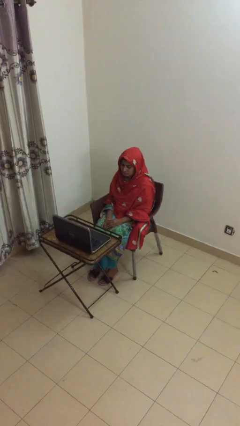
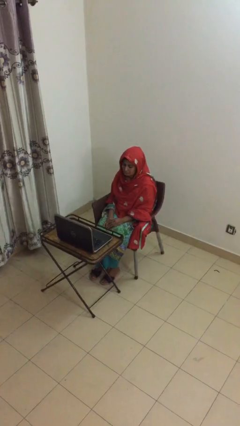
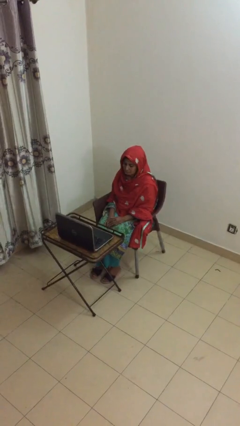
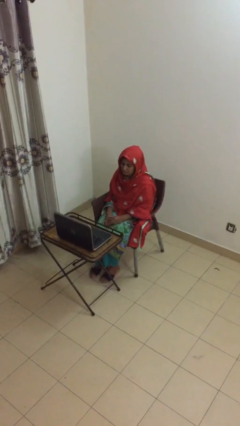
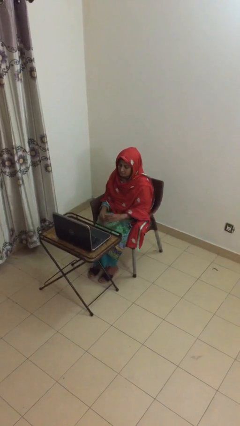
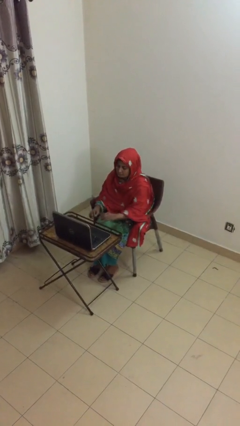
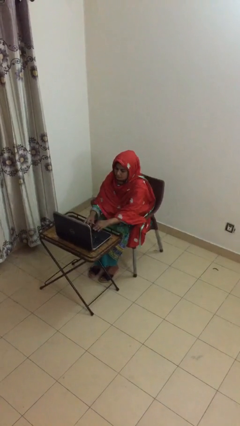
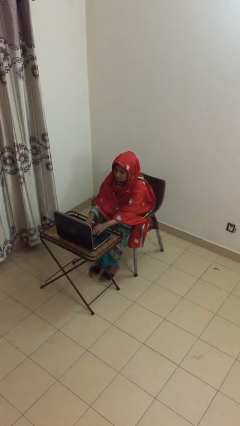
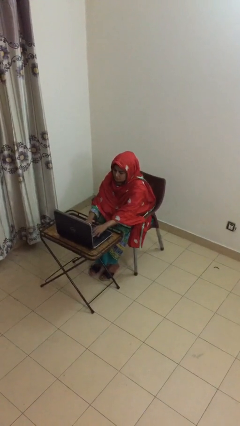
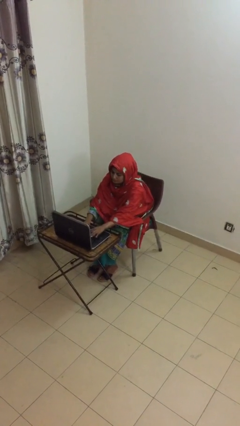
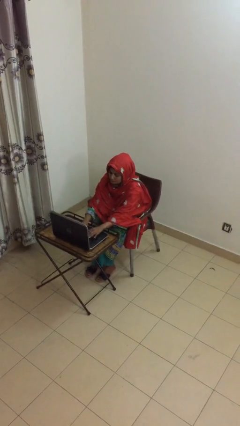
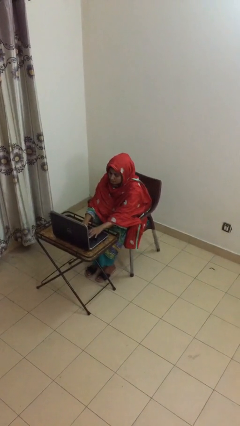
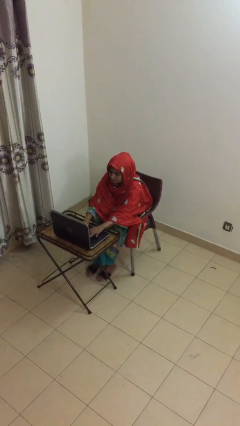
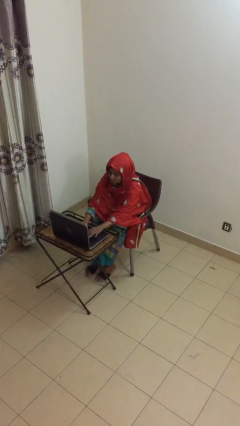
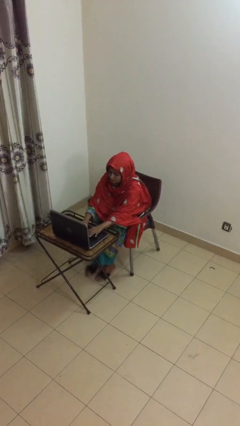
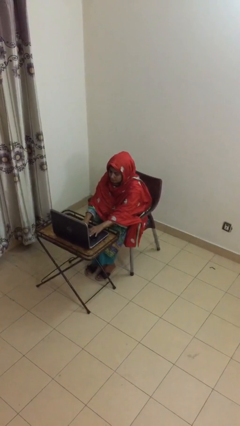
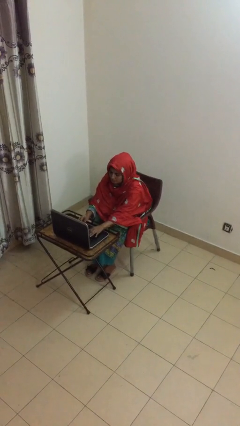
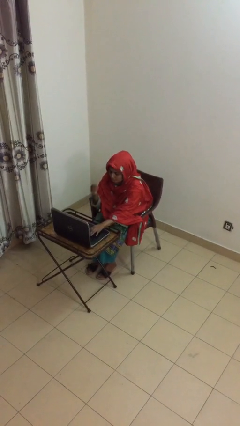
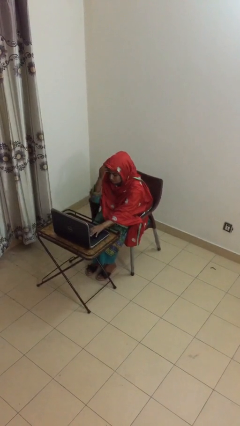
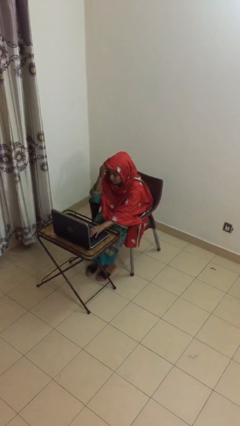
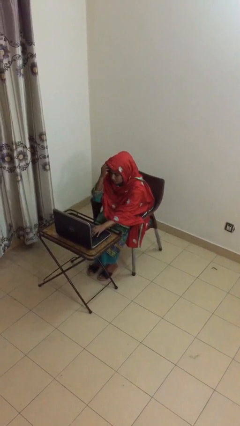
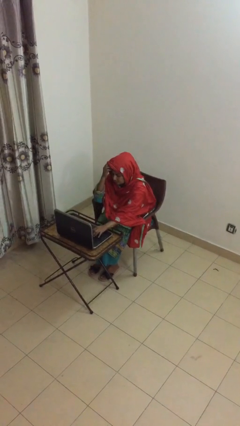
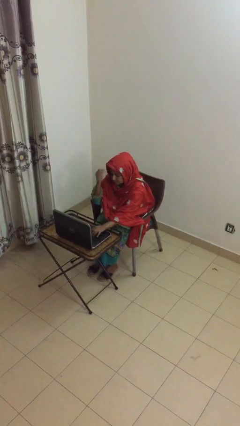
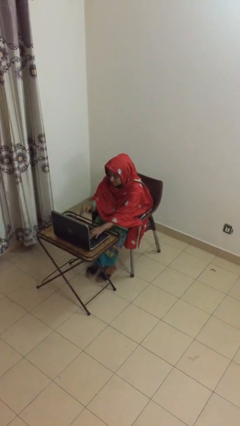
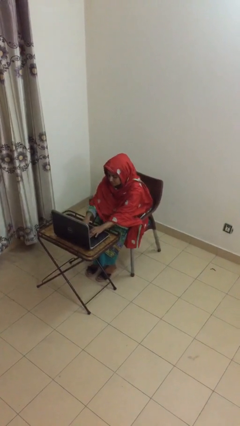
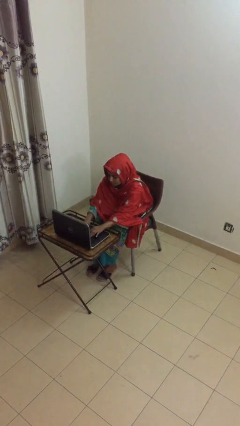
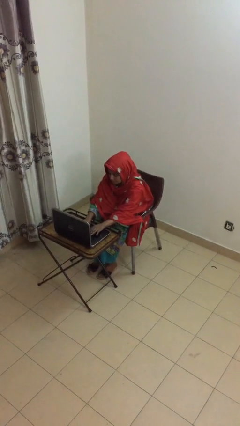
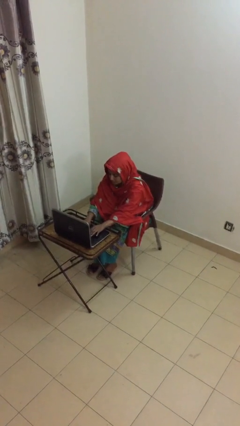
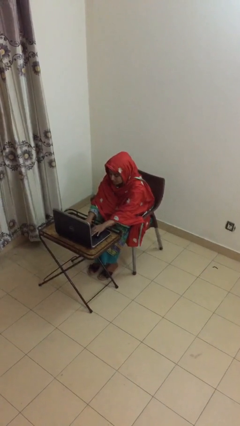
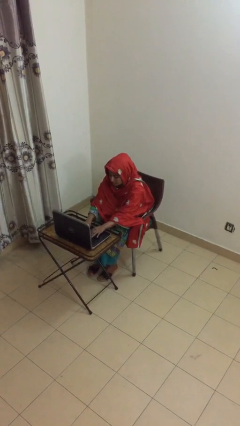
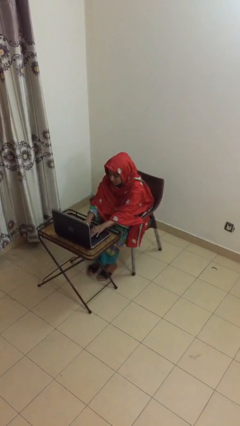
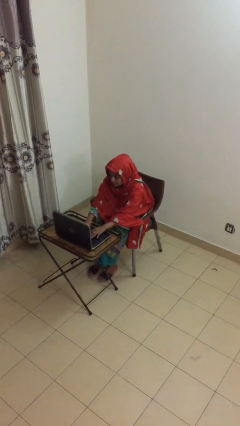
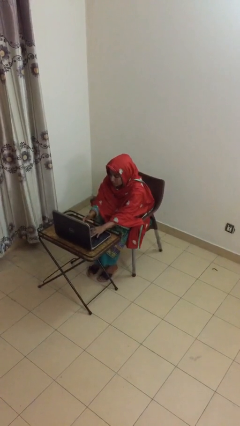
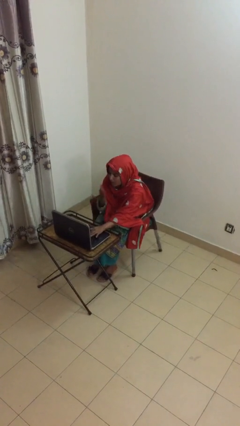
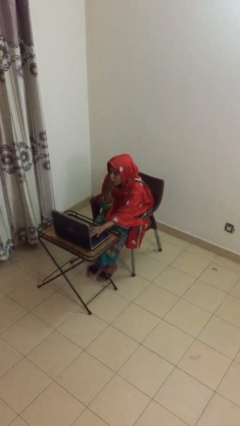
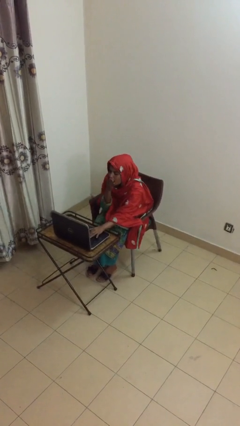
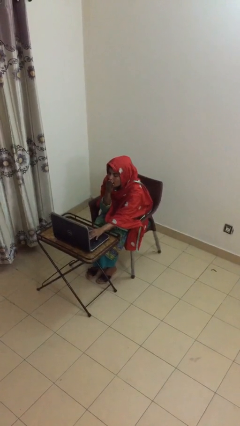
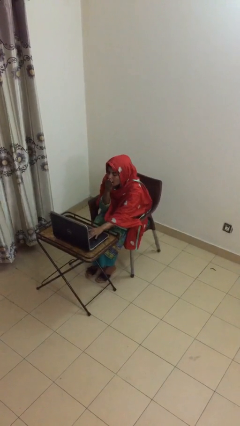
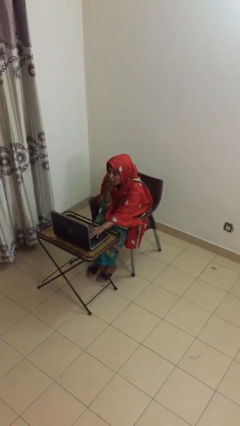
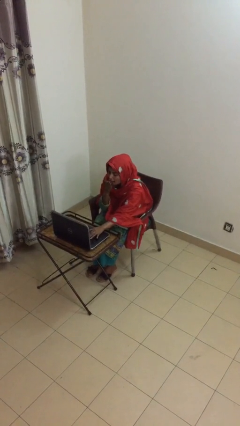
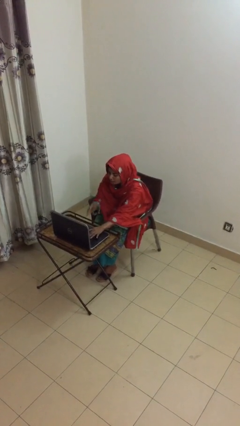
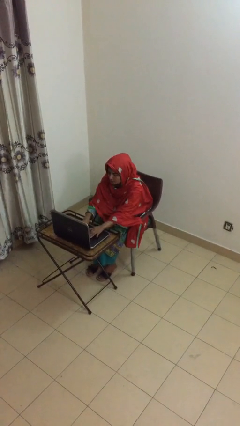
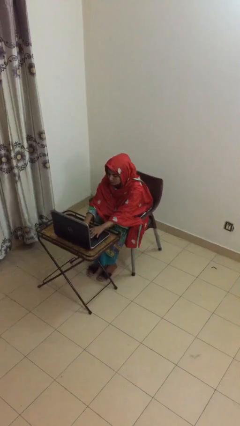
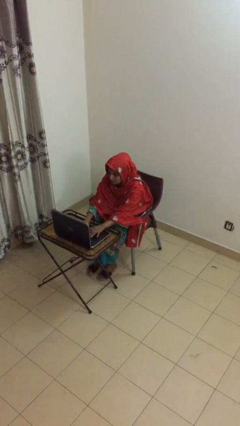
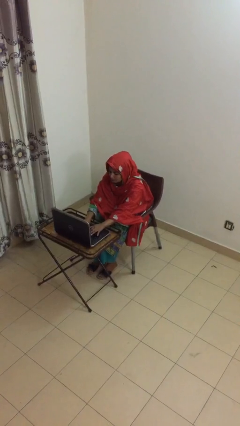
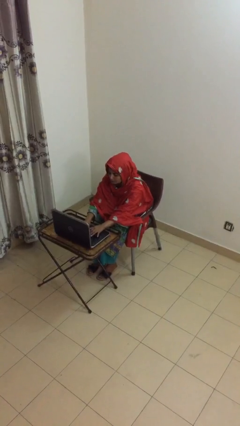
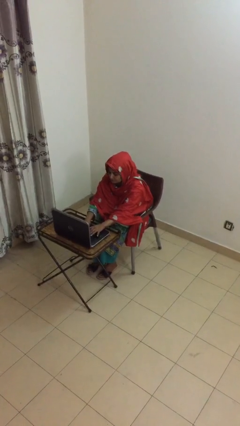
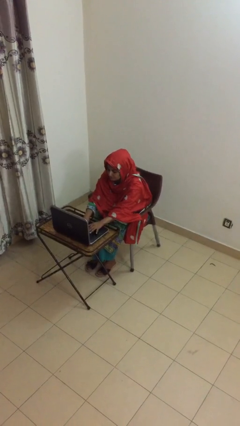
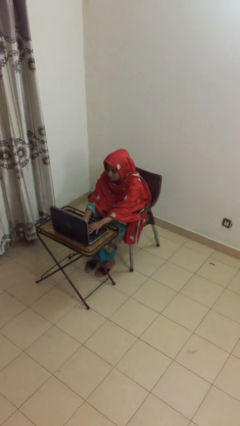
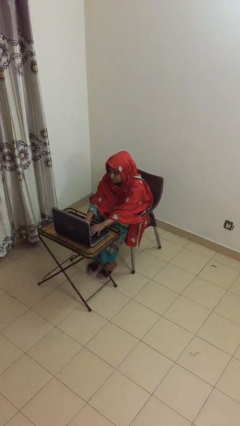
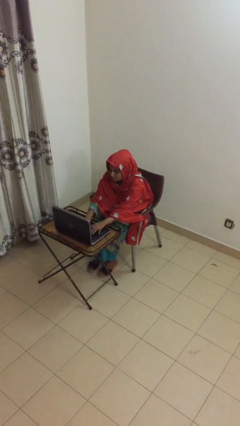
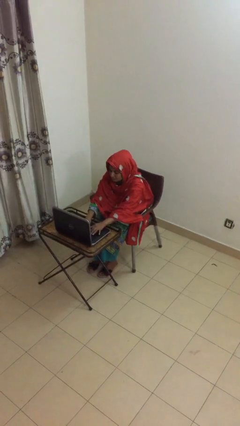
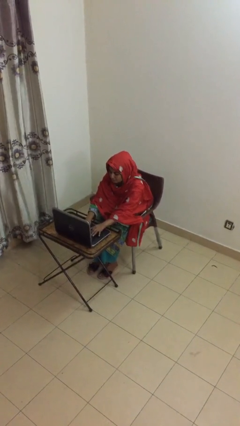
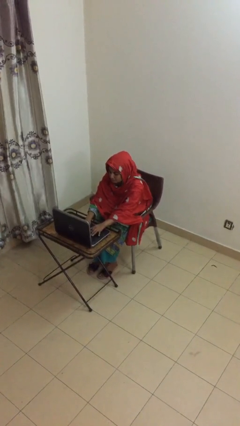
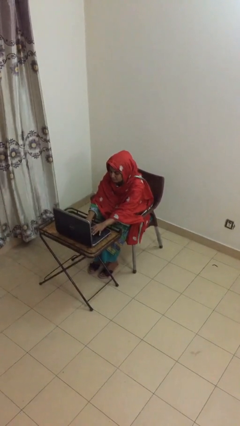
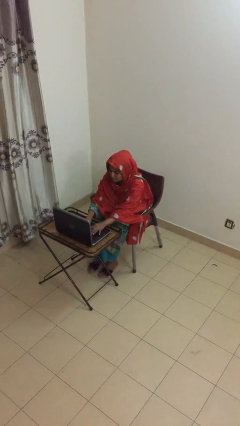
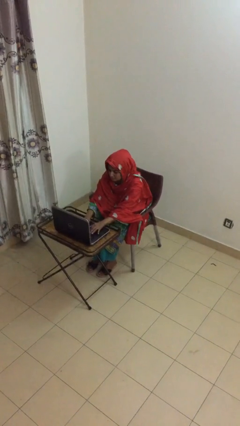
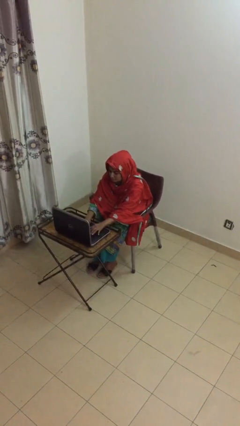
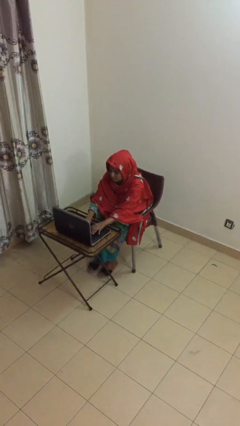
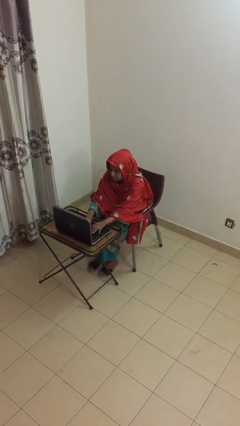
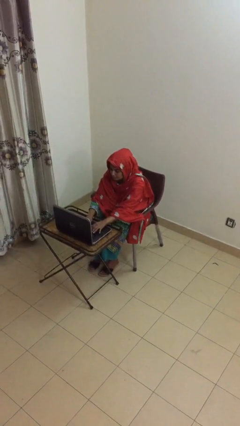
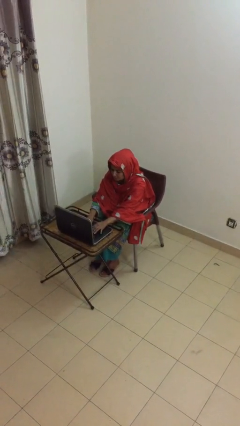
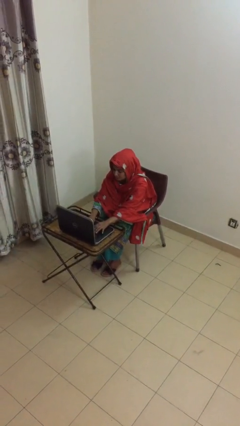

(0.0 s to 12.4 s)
person interacts with laptop

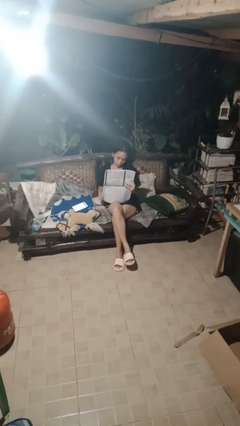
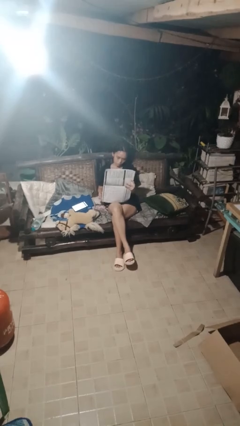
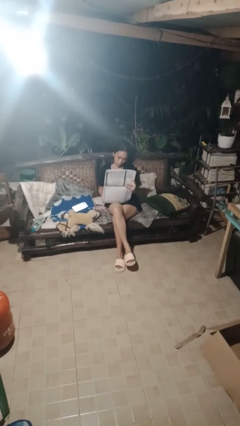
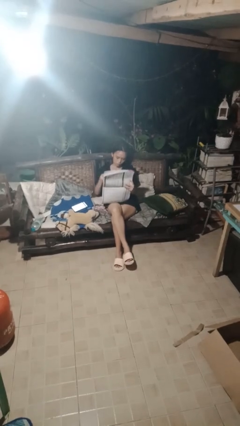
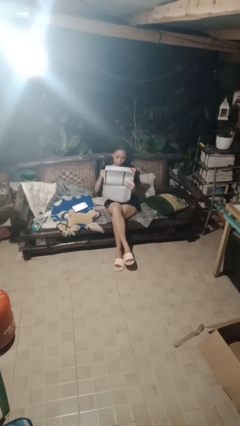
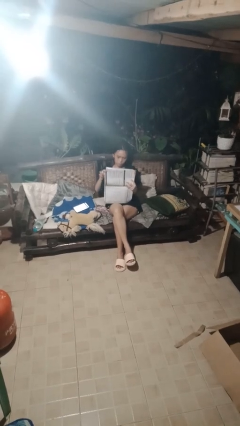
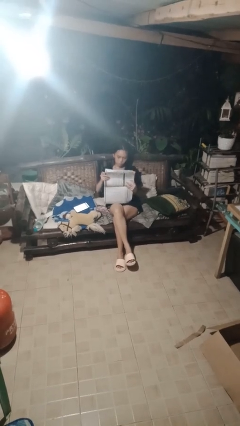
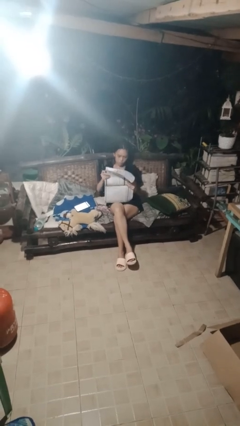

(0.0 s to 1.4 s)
person reads newspaper

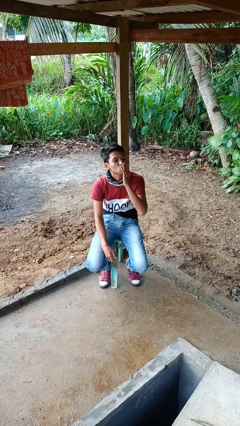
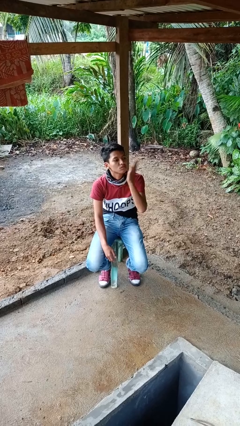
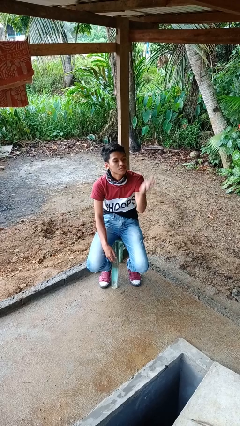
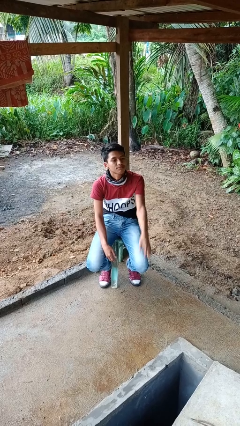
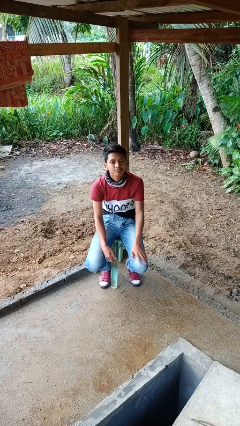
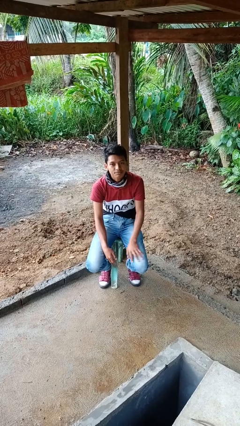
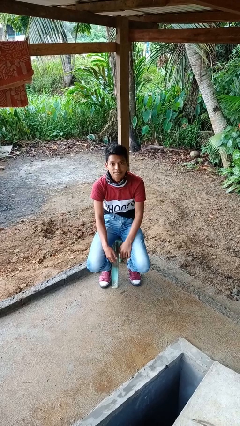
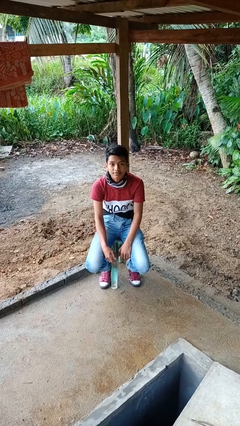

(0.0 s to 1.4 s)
person gestures blow kiss

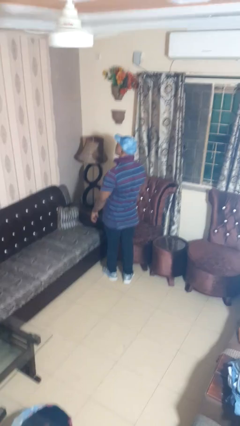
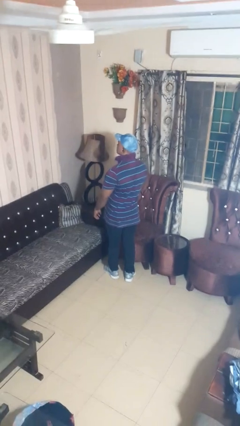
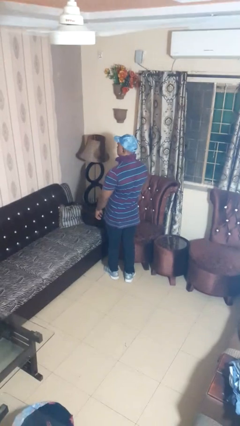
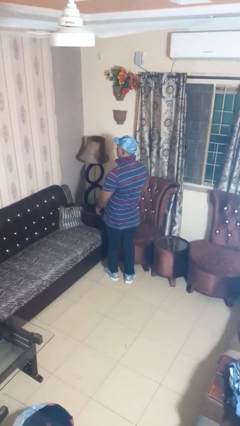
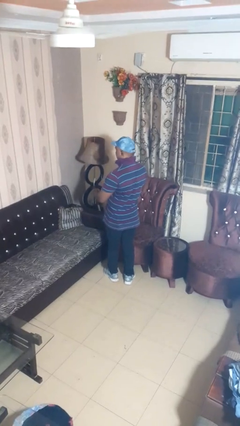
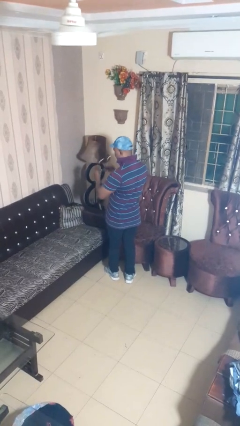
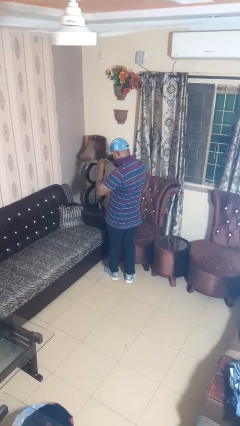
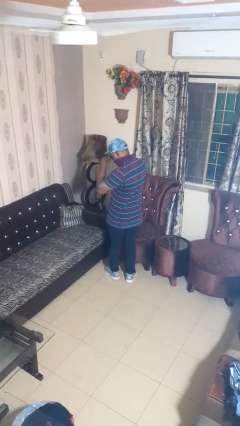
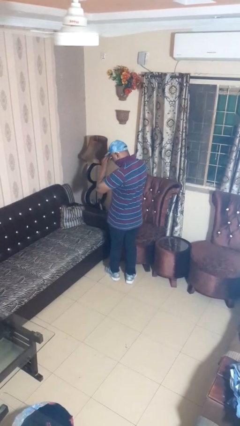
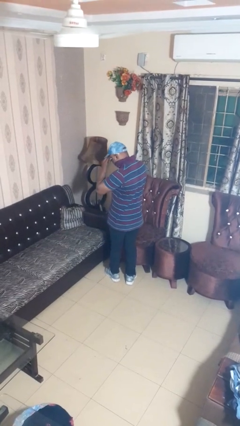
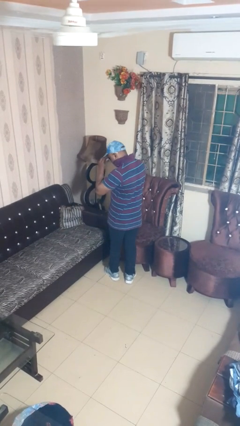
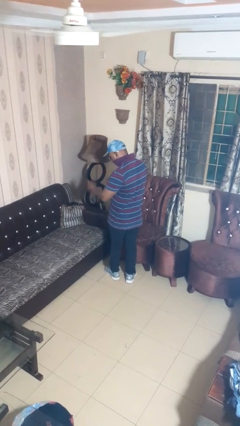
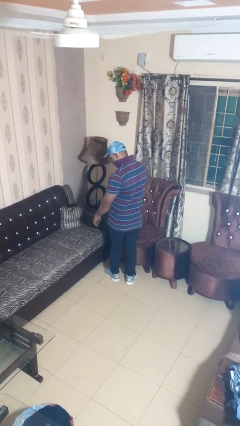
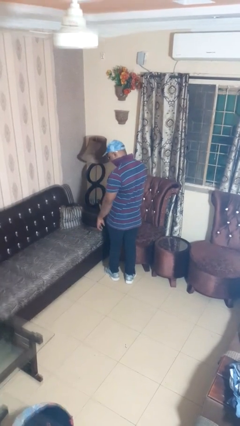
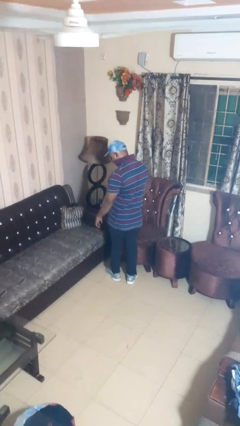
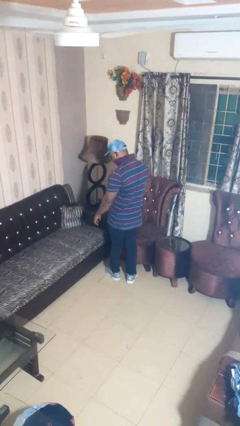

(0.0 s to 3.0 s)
person puts on sunglasses
